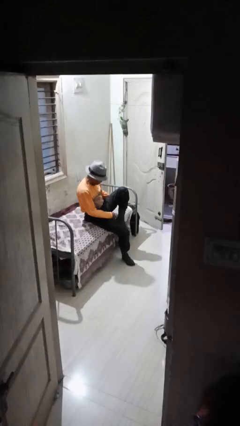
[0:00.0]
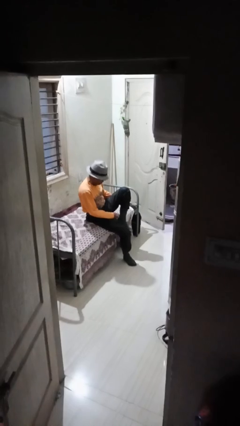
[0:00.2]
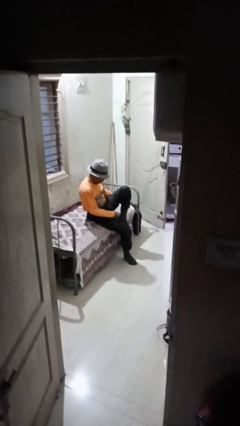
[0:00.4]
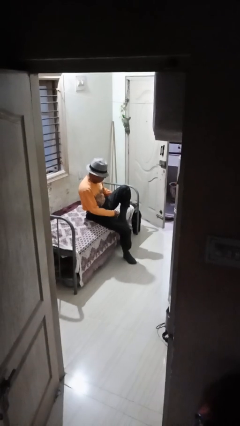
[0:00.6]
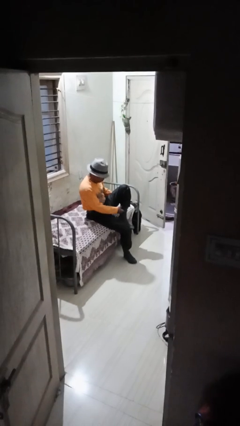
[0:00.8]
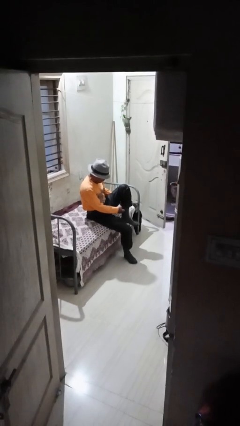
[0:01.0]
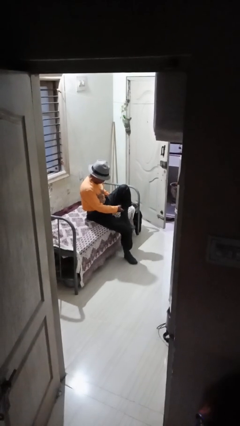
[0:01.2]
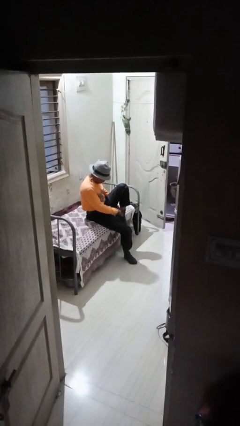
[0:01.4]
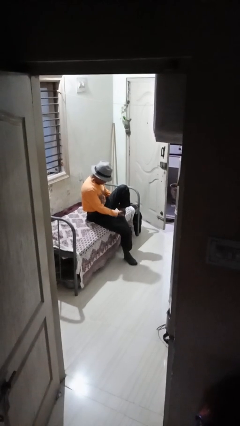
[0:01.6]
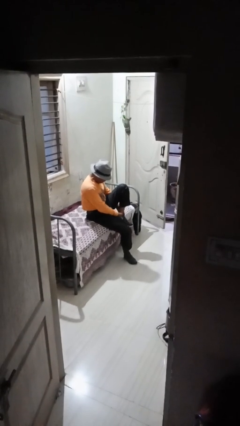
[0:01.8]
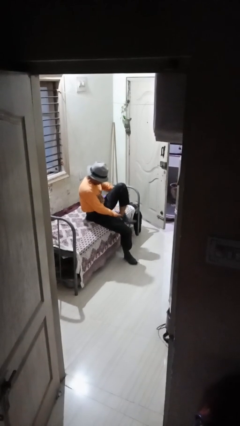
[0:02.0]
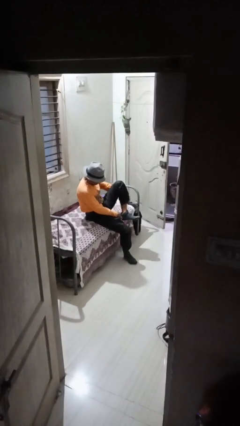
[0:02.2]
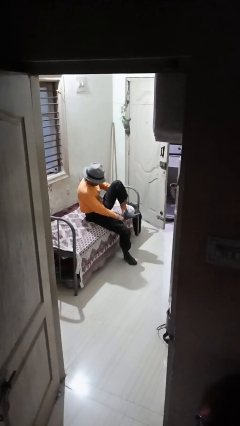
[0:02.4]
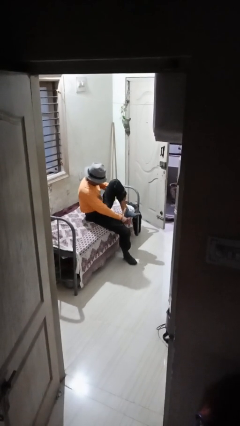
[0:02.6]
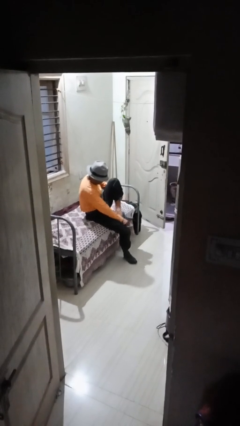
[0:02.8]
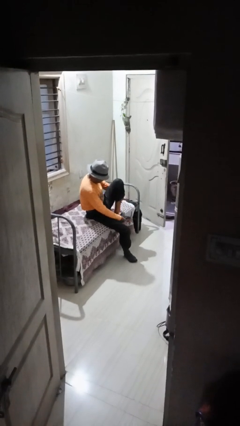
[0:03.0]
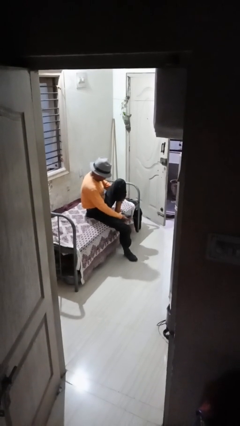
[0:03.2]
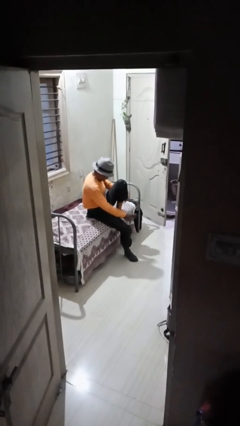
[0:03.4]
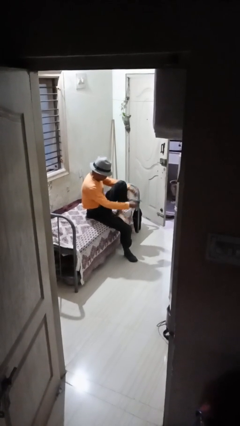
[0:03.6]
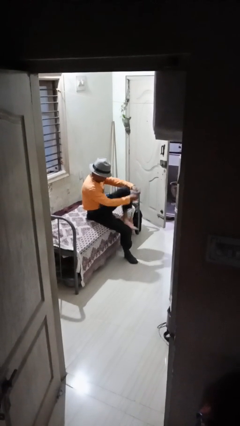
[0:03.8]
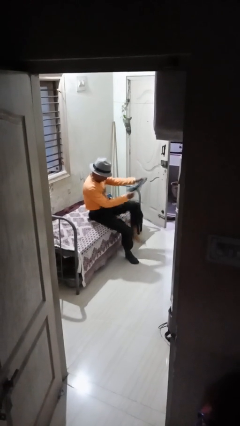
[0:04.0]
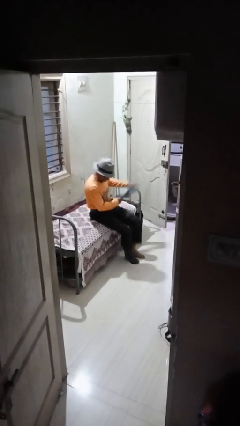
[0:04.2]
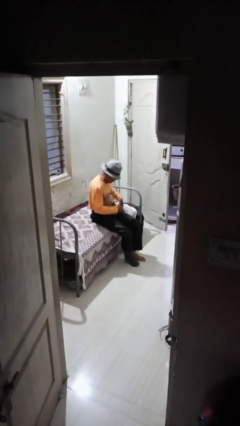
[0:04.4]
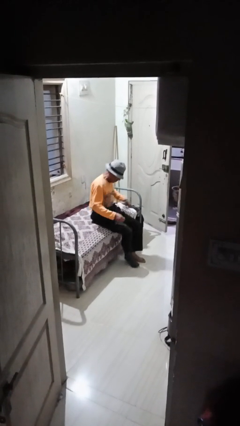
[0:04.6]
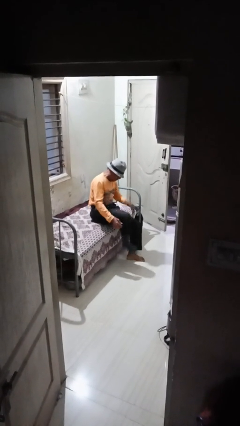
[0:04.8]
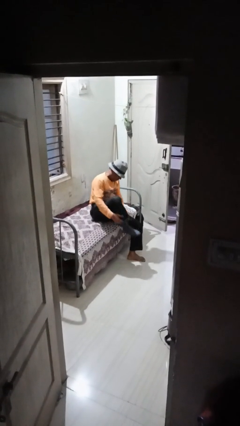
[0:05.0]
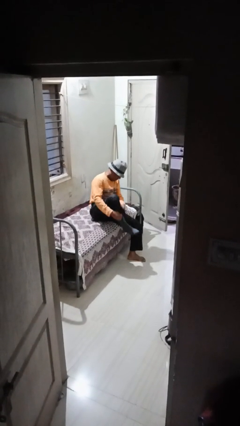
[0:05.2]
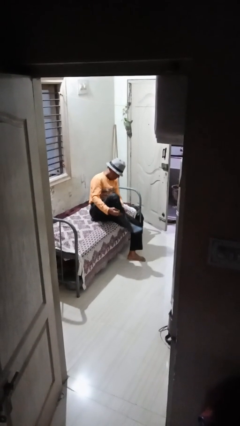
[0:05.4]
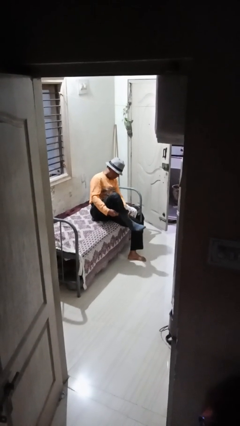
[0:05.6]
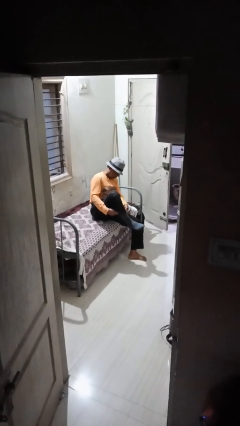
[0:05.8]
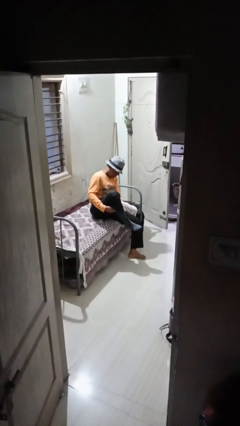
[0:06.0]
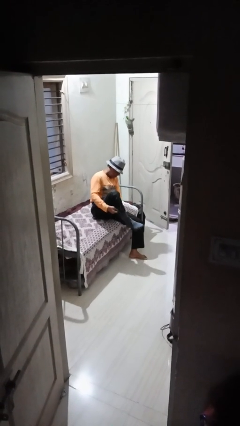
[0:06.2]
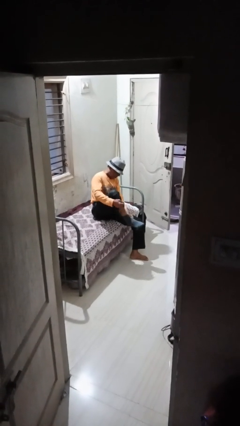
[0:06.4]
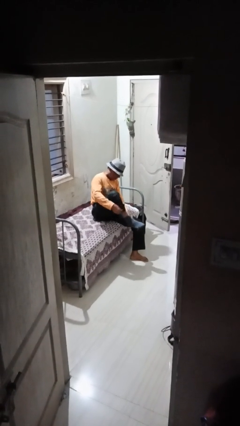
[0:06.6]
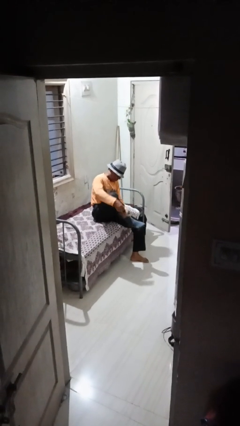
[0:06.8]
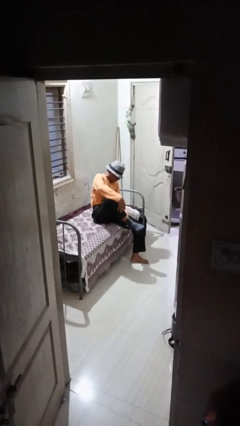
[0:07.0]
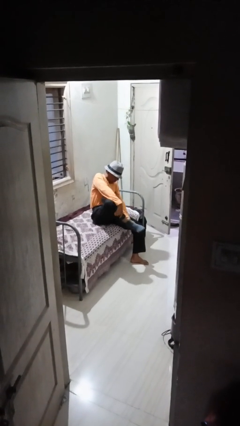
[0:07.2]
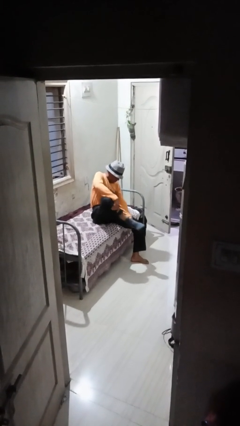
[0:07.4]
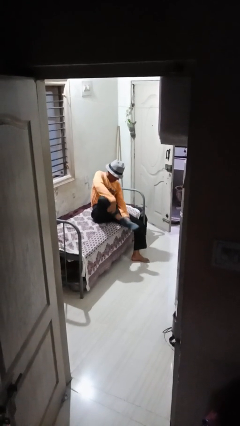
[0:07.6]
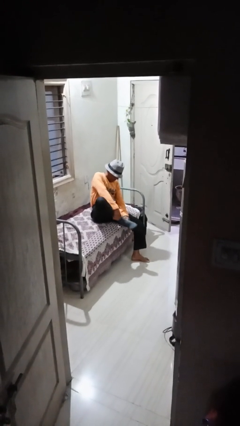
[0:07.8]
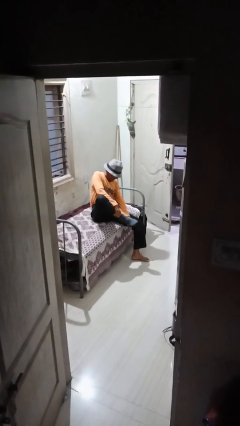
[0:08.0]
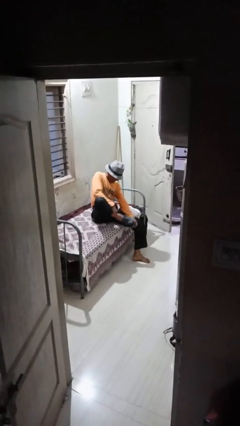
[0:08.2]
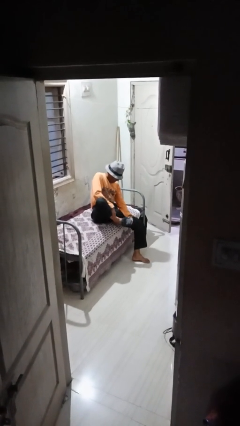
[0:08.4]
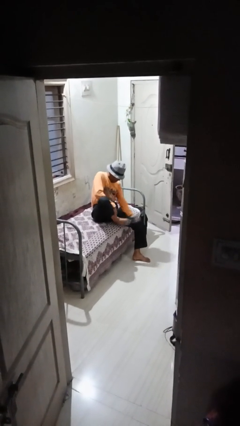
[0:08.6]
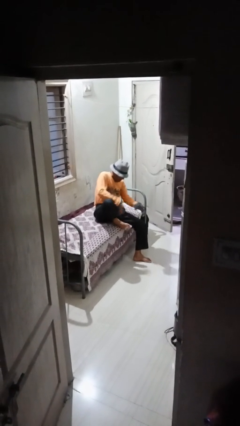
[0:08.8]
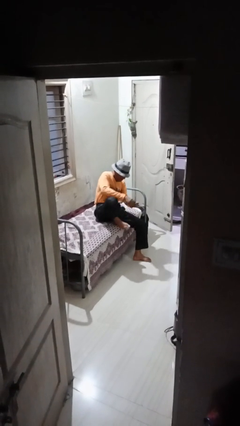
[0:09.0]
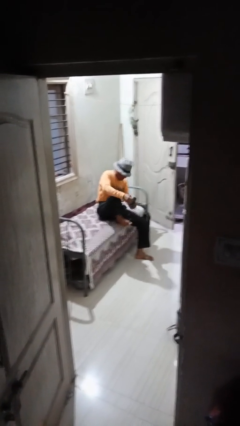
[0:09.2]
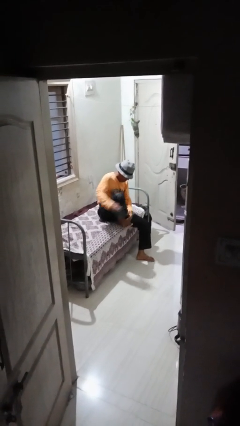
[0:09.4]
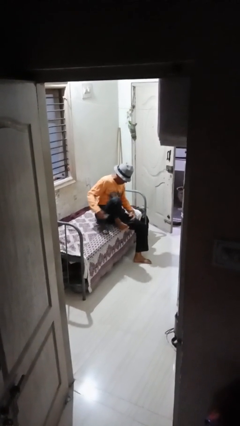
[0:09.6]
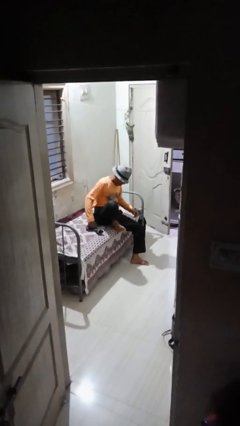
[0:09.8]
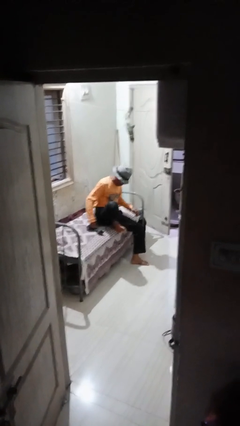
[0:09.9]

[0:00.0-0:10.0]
person takes off socks

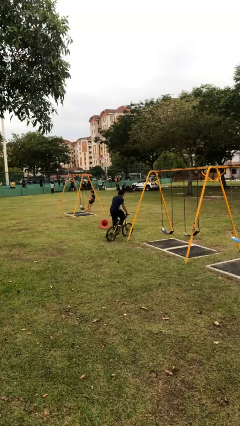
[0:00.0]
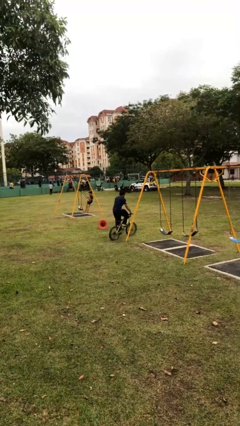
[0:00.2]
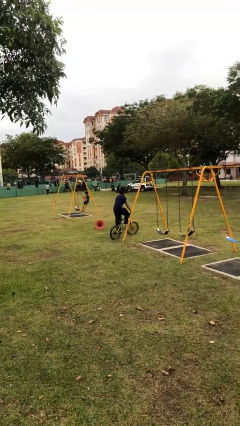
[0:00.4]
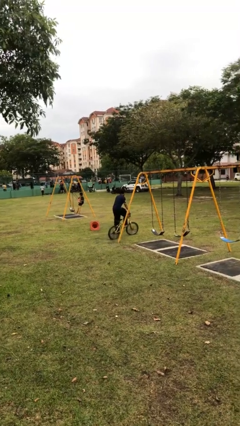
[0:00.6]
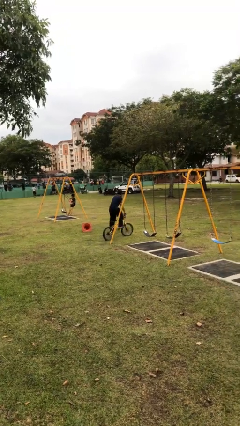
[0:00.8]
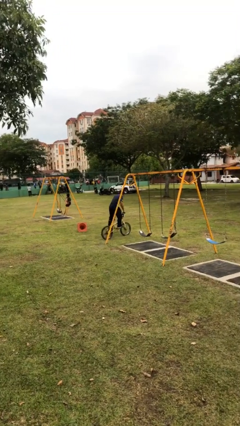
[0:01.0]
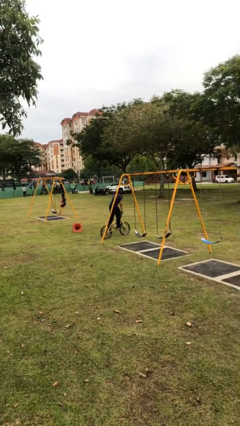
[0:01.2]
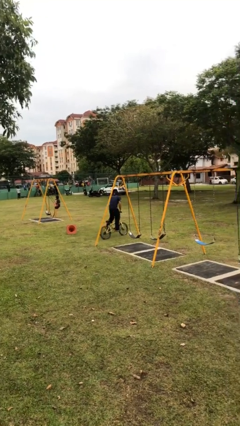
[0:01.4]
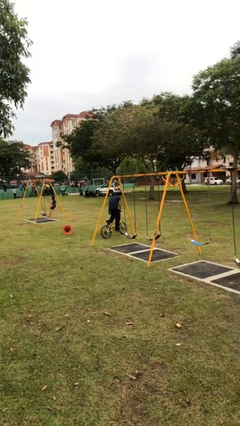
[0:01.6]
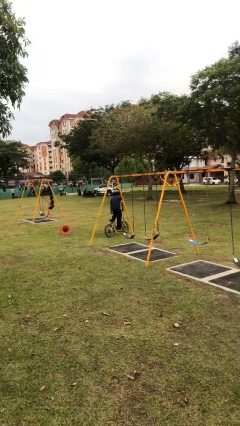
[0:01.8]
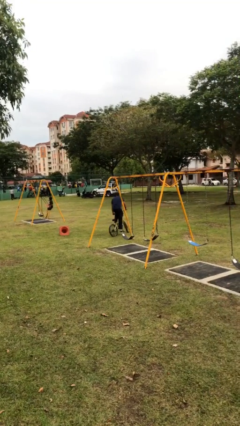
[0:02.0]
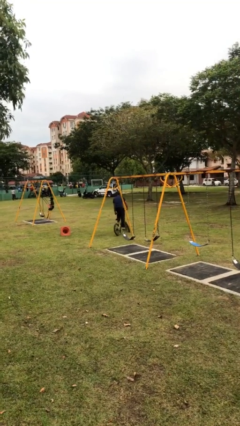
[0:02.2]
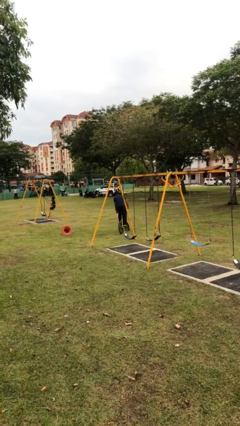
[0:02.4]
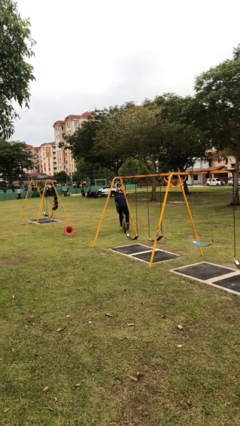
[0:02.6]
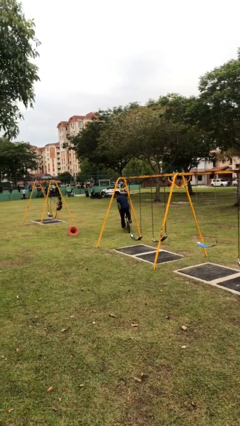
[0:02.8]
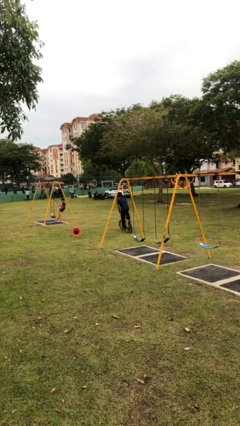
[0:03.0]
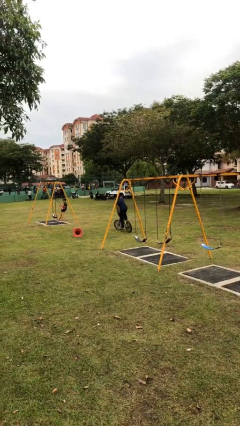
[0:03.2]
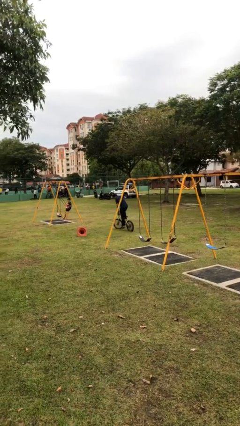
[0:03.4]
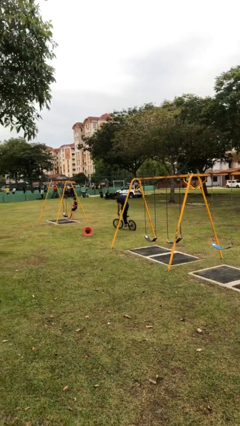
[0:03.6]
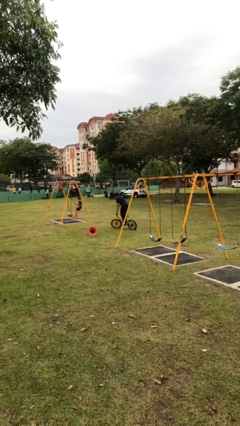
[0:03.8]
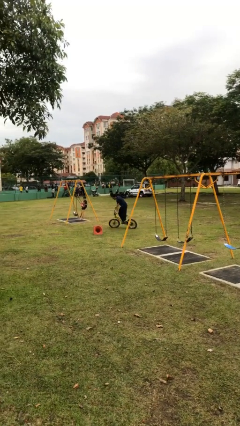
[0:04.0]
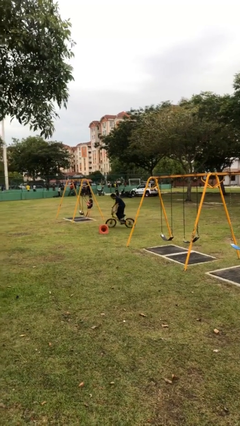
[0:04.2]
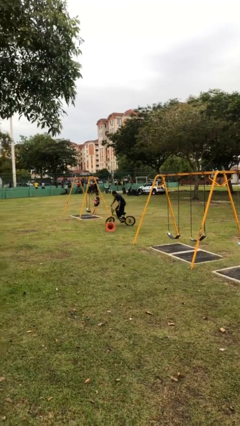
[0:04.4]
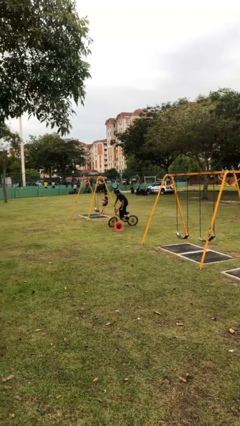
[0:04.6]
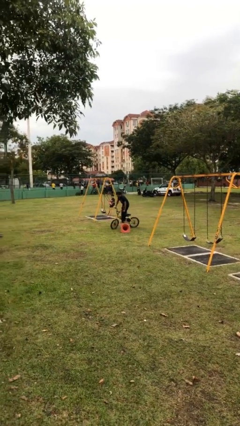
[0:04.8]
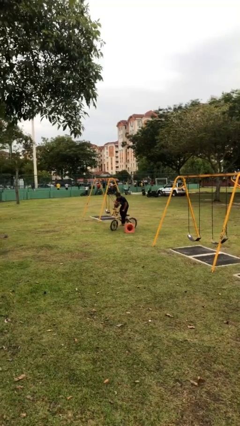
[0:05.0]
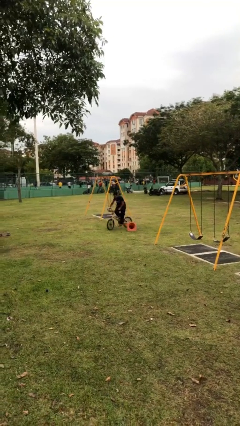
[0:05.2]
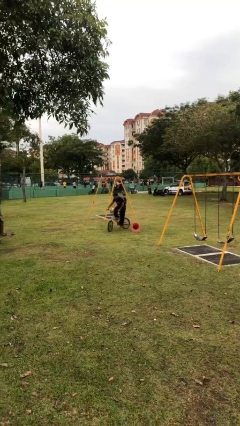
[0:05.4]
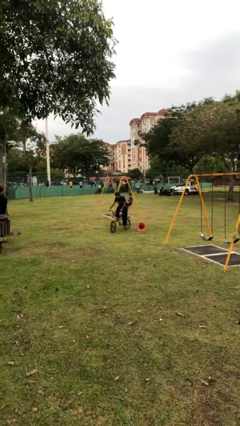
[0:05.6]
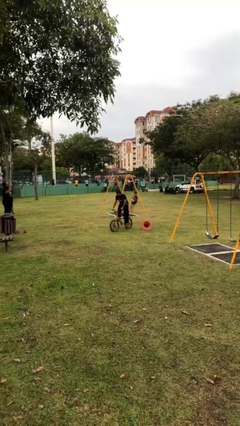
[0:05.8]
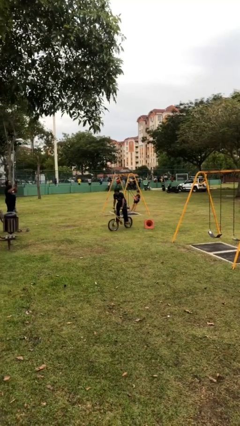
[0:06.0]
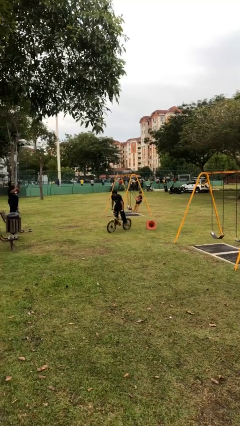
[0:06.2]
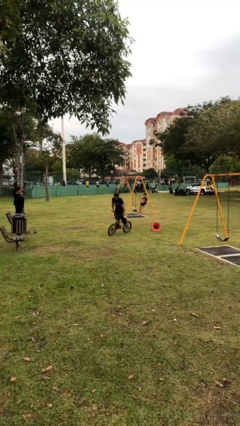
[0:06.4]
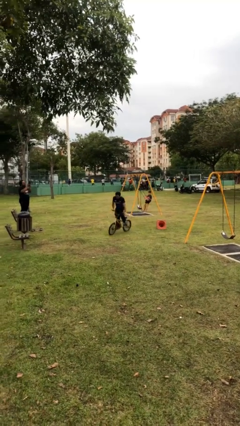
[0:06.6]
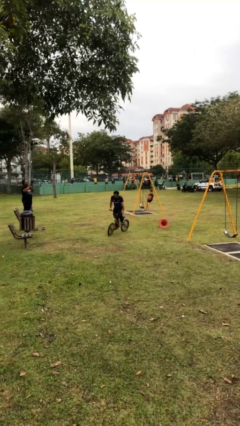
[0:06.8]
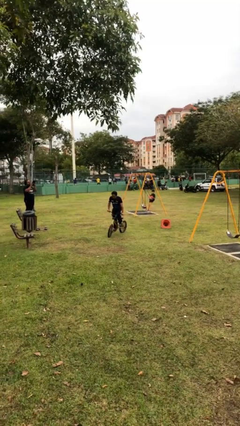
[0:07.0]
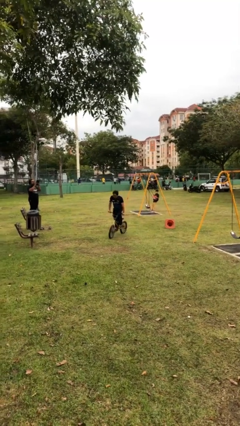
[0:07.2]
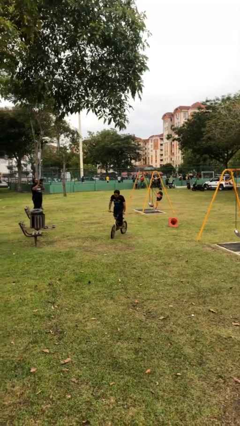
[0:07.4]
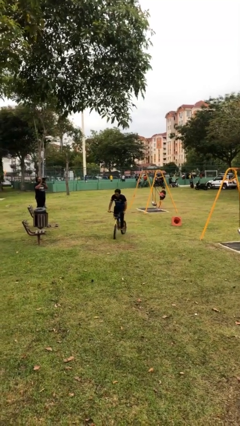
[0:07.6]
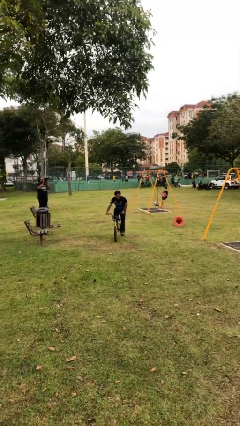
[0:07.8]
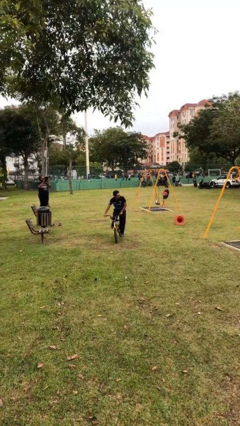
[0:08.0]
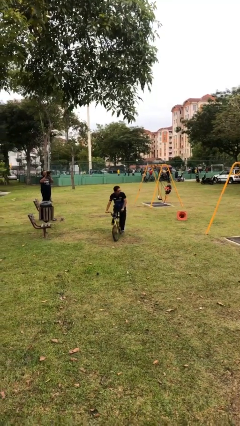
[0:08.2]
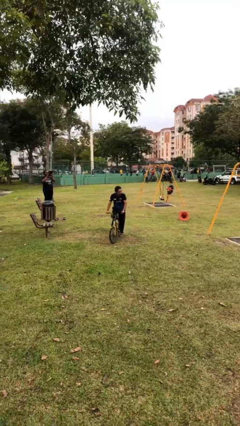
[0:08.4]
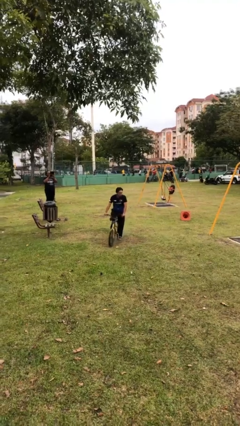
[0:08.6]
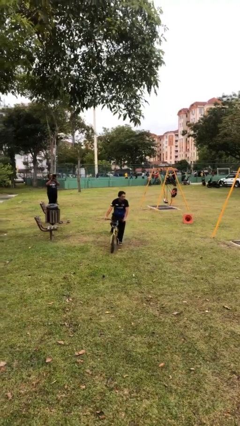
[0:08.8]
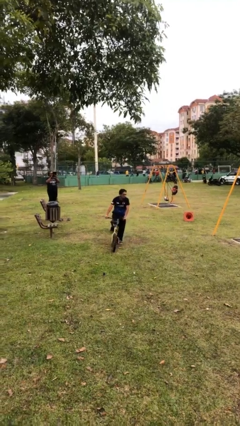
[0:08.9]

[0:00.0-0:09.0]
person rides bicycle
